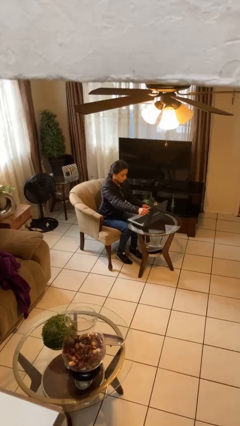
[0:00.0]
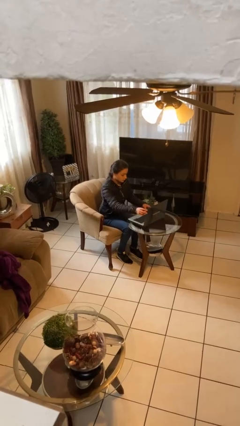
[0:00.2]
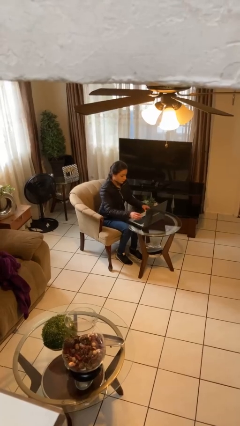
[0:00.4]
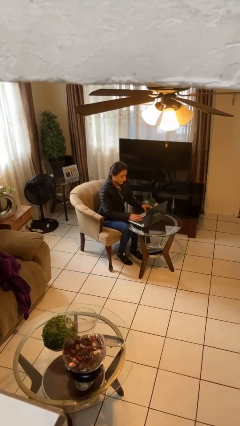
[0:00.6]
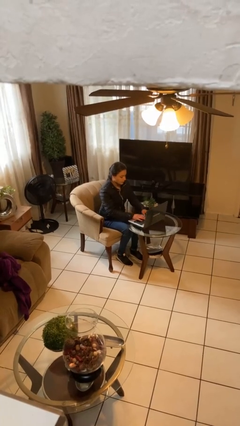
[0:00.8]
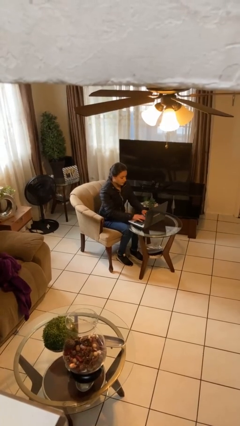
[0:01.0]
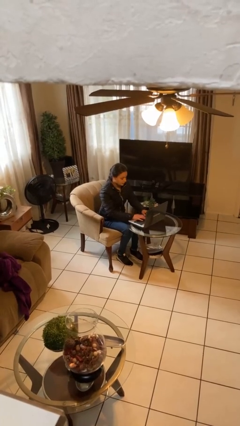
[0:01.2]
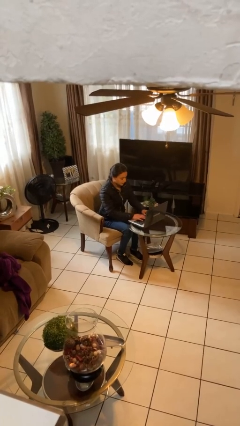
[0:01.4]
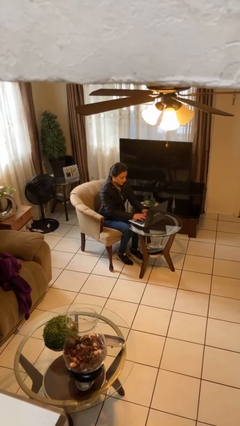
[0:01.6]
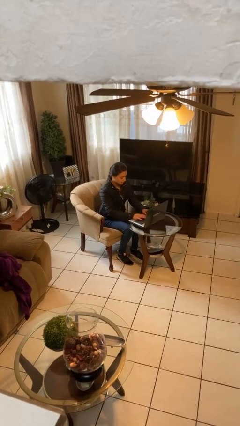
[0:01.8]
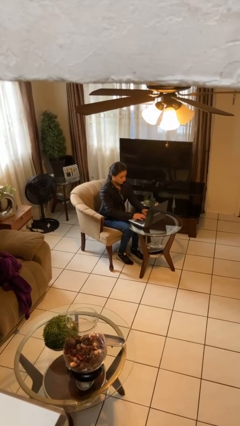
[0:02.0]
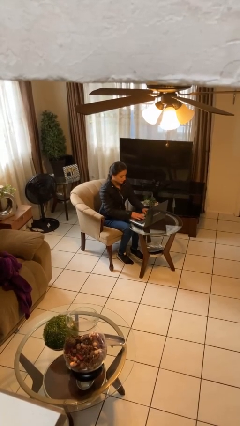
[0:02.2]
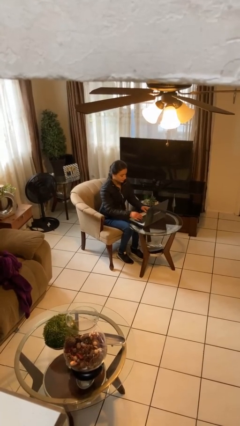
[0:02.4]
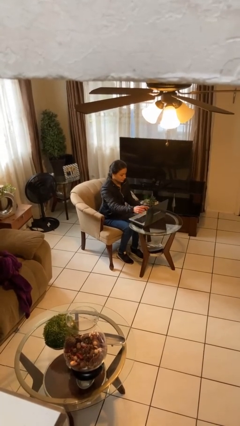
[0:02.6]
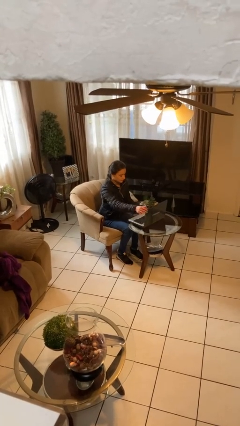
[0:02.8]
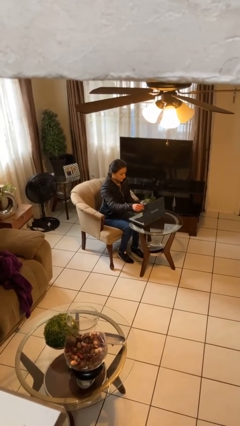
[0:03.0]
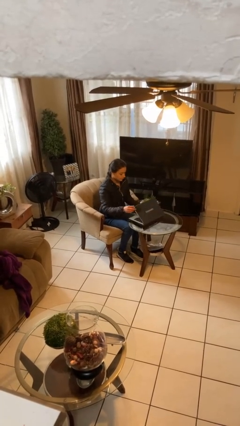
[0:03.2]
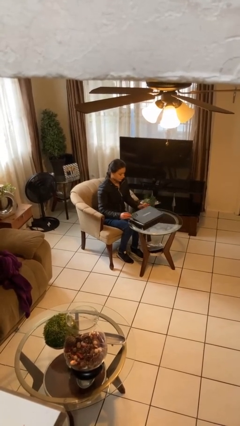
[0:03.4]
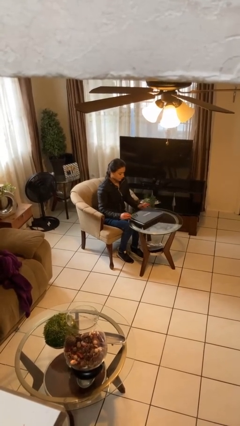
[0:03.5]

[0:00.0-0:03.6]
person interacts with laptop

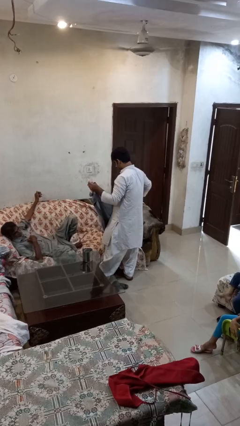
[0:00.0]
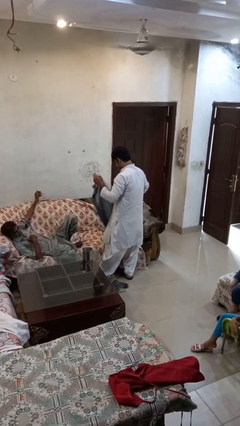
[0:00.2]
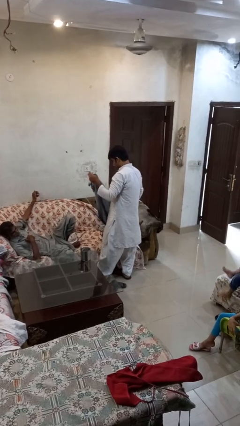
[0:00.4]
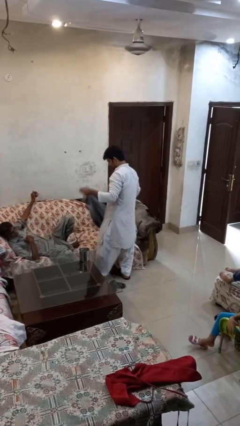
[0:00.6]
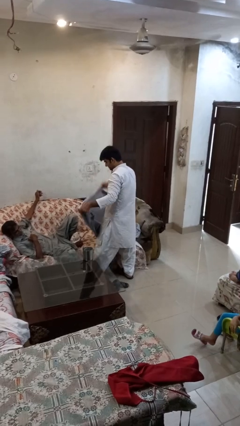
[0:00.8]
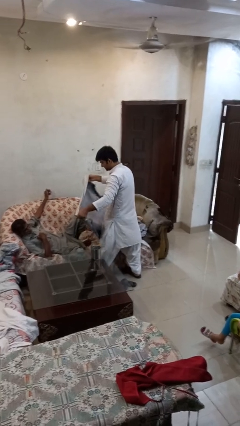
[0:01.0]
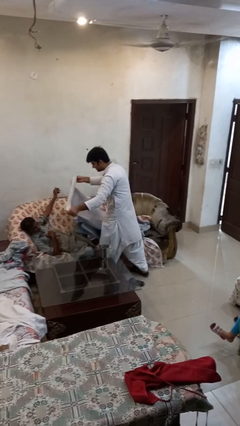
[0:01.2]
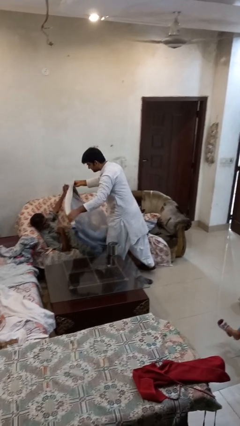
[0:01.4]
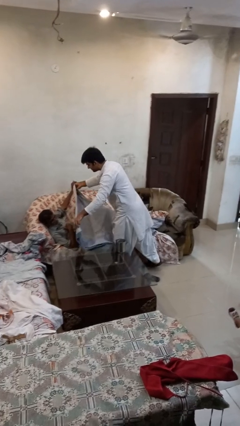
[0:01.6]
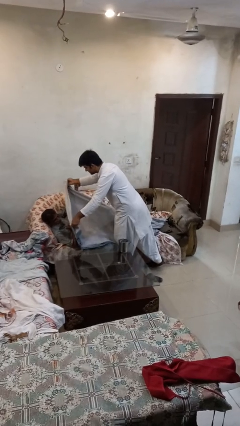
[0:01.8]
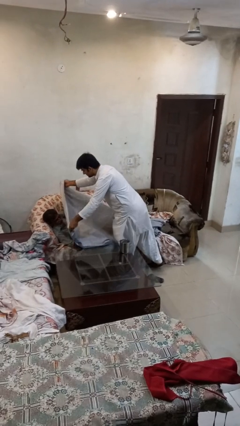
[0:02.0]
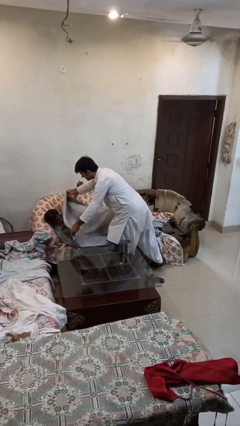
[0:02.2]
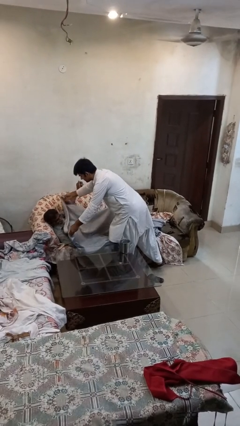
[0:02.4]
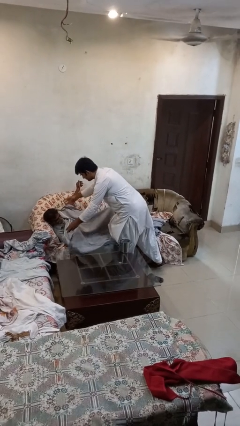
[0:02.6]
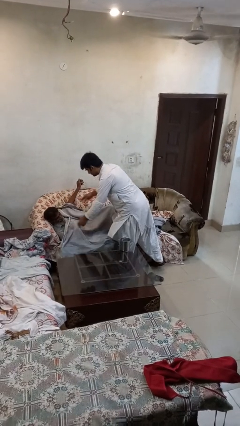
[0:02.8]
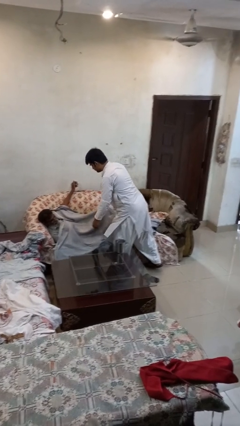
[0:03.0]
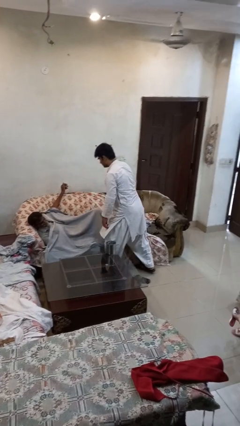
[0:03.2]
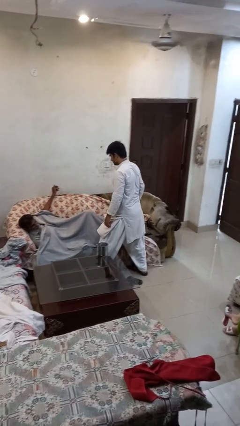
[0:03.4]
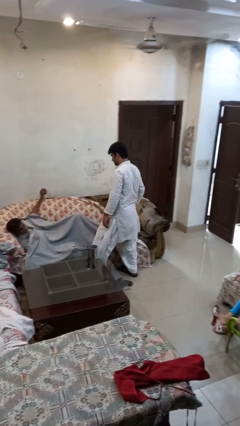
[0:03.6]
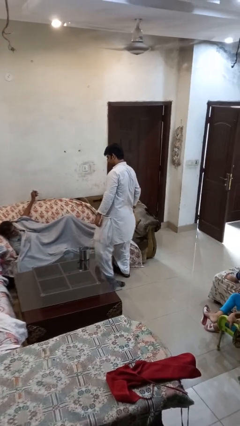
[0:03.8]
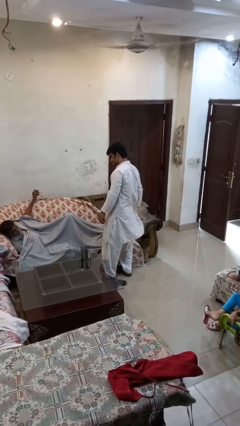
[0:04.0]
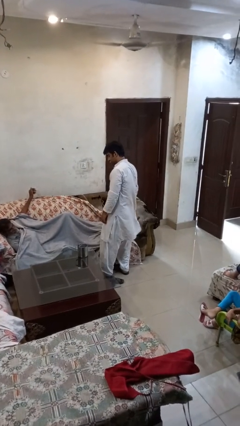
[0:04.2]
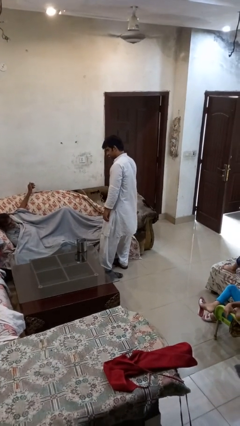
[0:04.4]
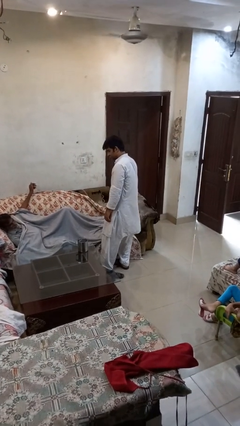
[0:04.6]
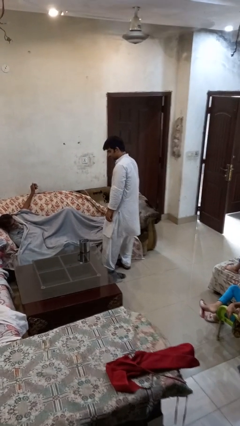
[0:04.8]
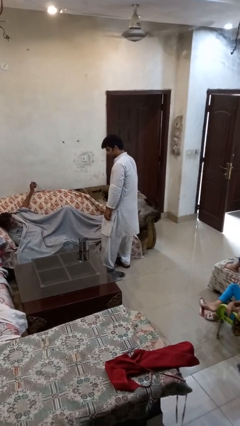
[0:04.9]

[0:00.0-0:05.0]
person covers friend with blanket

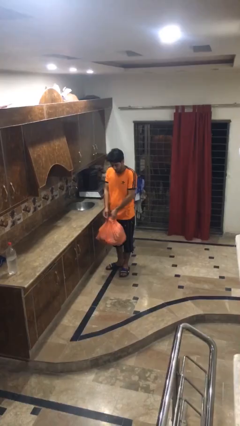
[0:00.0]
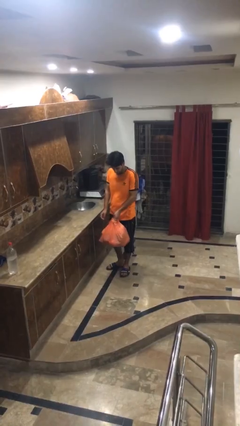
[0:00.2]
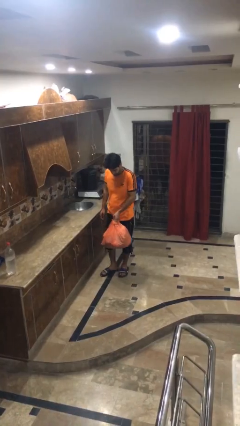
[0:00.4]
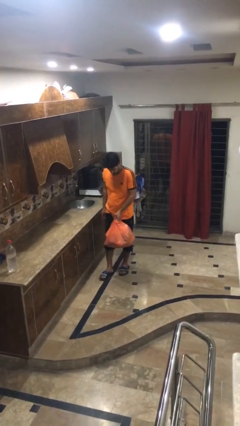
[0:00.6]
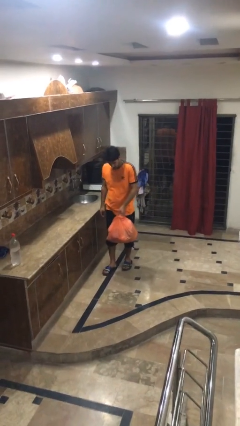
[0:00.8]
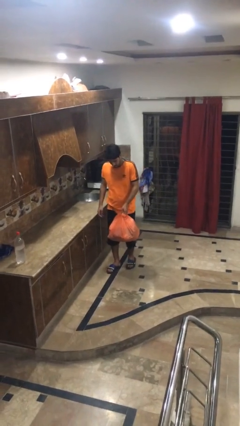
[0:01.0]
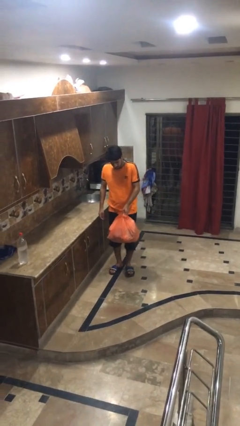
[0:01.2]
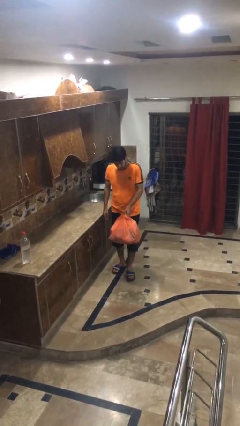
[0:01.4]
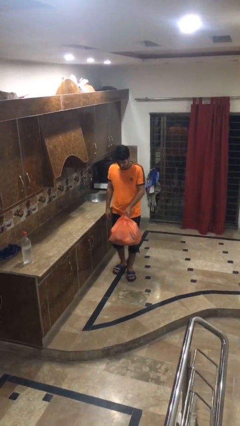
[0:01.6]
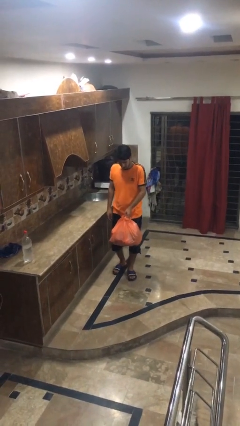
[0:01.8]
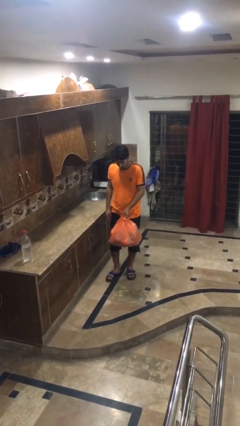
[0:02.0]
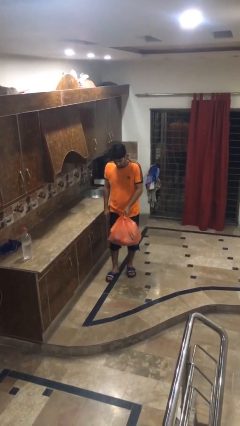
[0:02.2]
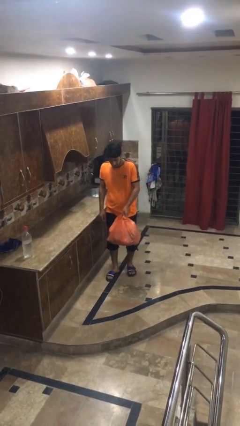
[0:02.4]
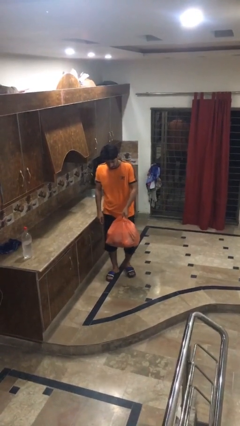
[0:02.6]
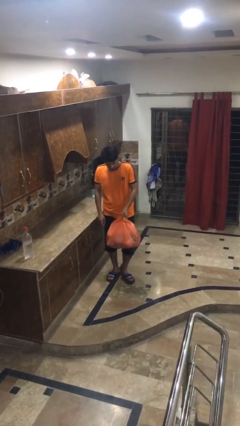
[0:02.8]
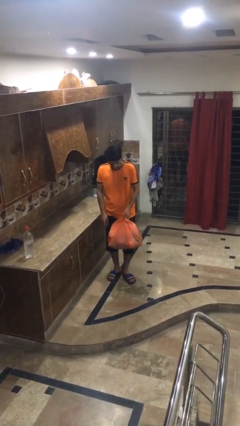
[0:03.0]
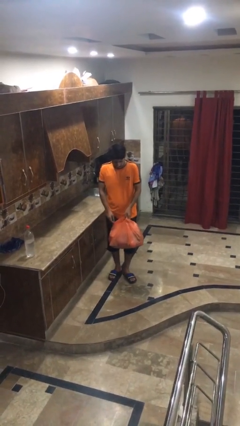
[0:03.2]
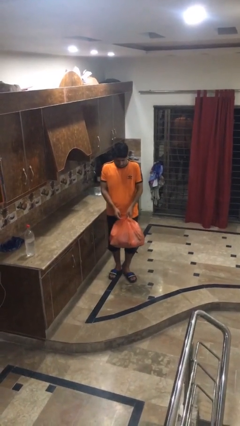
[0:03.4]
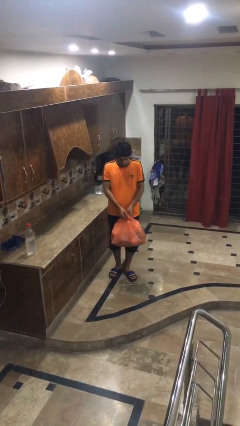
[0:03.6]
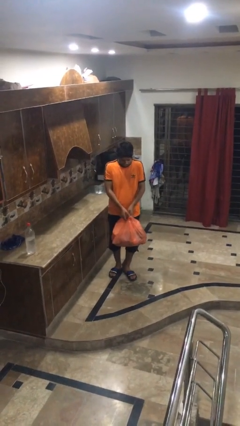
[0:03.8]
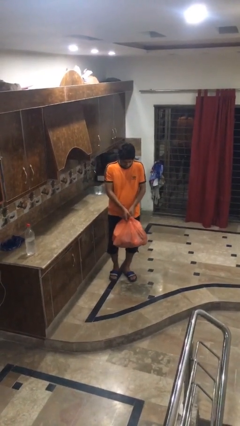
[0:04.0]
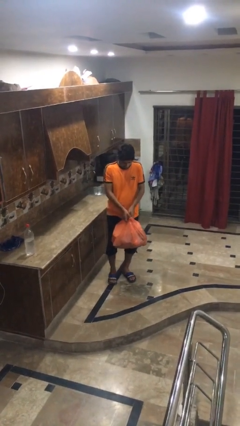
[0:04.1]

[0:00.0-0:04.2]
person carries groceries

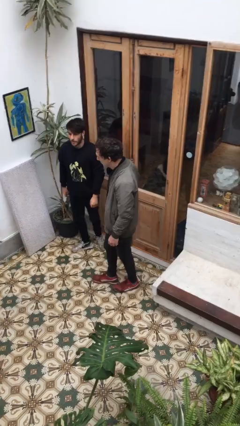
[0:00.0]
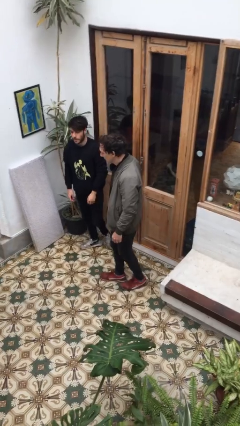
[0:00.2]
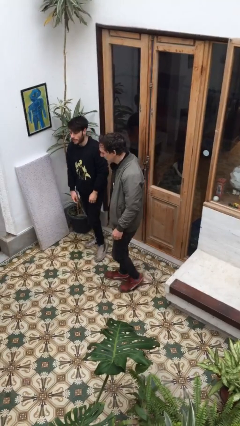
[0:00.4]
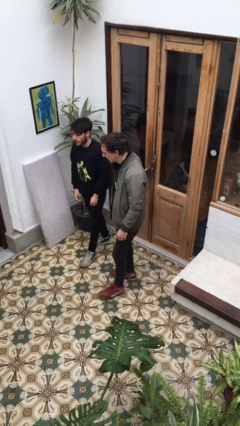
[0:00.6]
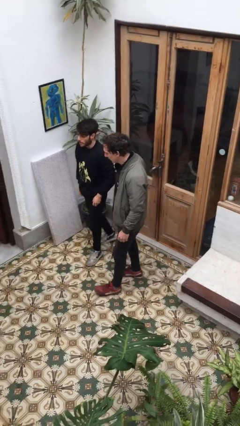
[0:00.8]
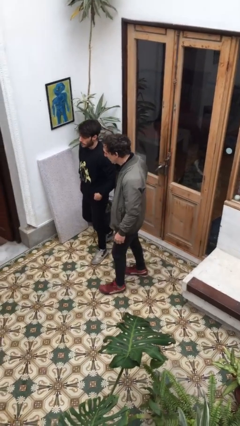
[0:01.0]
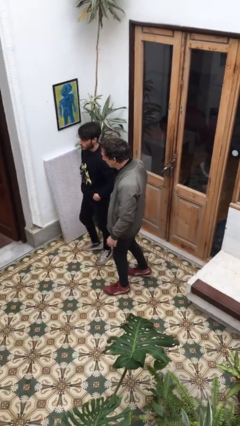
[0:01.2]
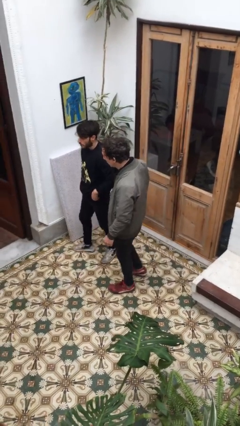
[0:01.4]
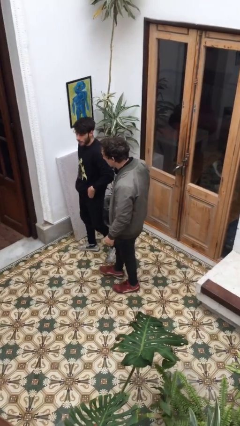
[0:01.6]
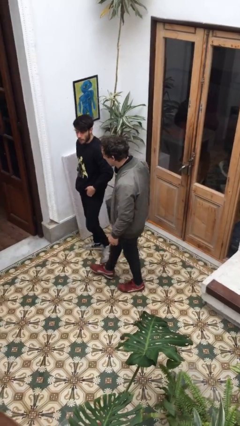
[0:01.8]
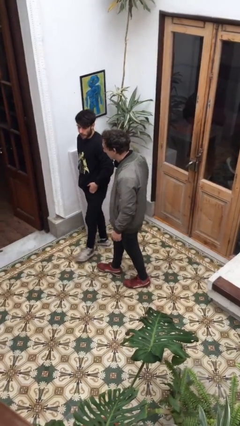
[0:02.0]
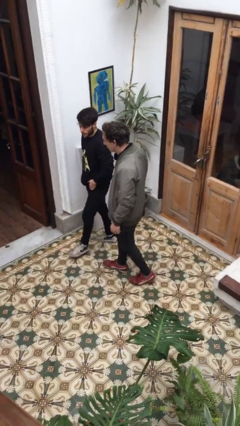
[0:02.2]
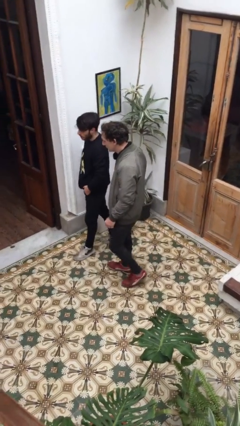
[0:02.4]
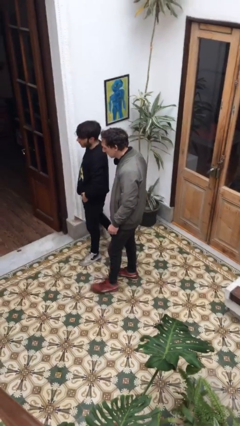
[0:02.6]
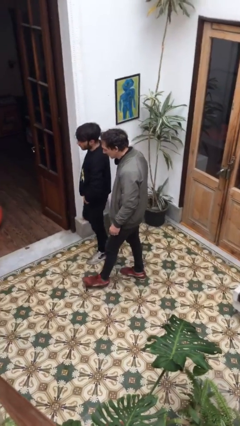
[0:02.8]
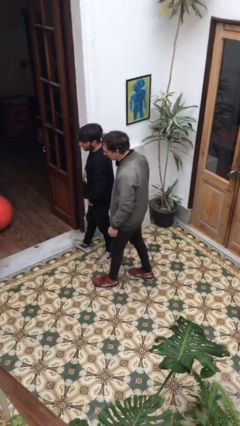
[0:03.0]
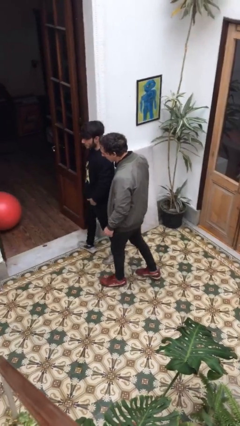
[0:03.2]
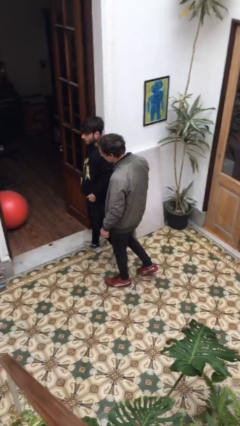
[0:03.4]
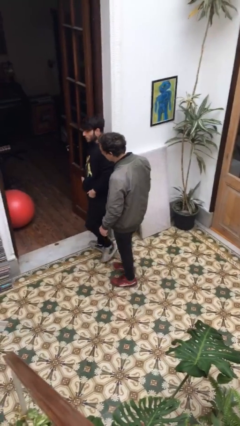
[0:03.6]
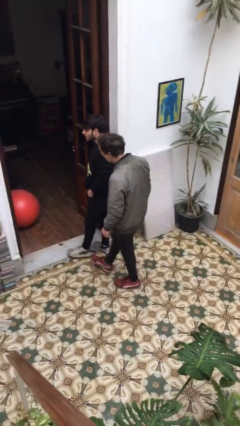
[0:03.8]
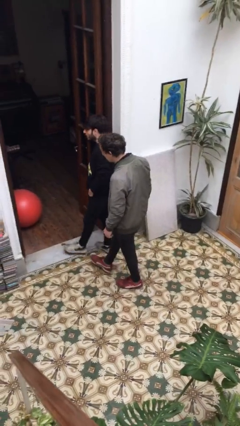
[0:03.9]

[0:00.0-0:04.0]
person talks to person

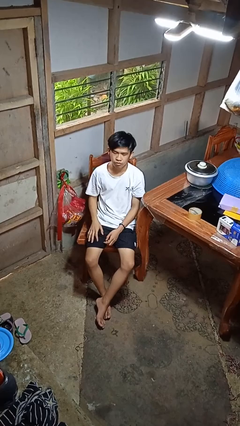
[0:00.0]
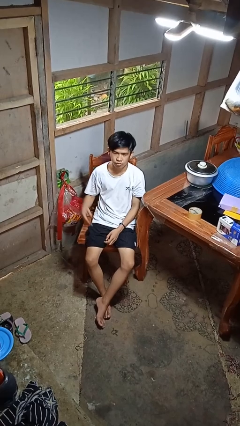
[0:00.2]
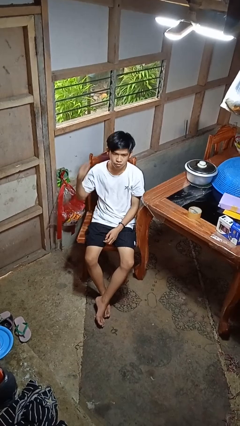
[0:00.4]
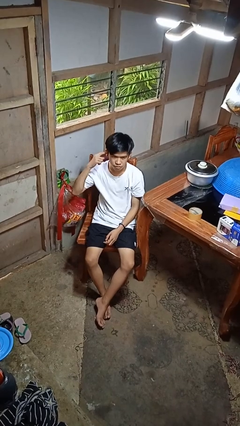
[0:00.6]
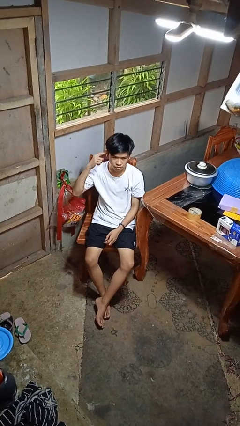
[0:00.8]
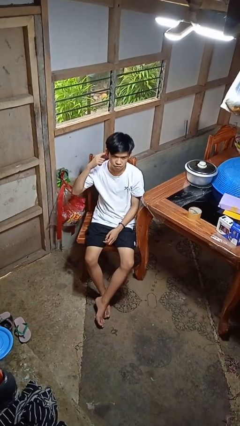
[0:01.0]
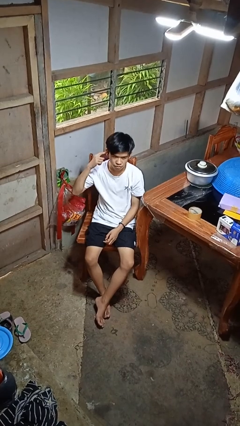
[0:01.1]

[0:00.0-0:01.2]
person gestures listen closely
